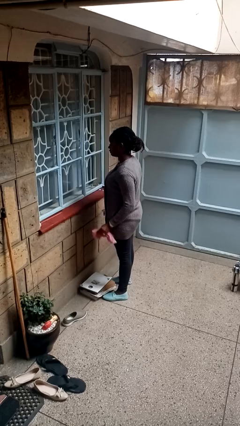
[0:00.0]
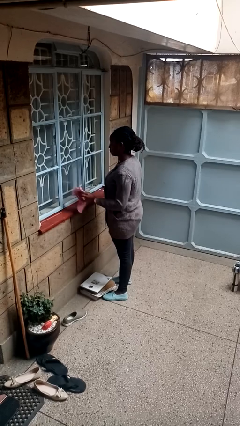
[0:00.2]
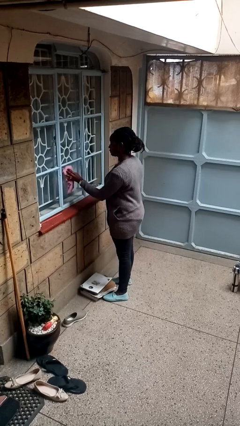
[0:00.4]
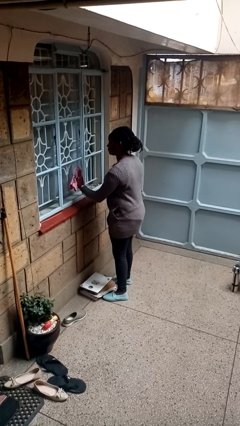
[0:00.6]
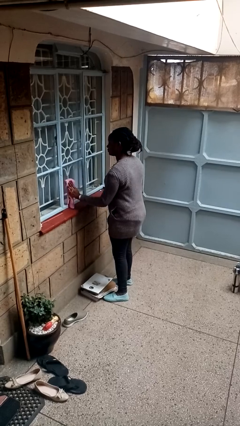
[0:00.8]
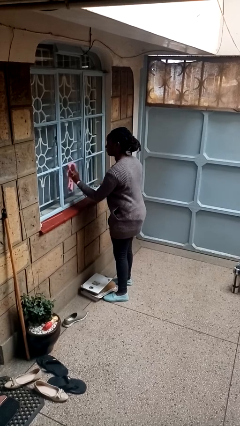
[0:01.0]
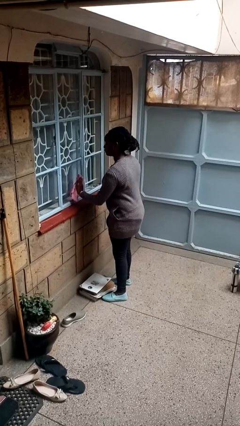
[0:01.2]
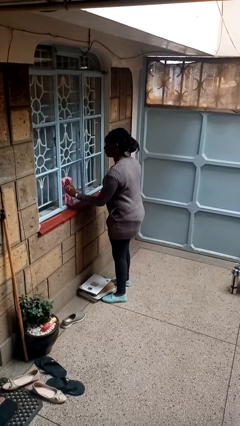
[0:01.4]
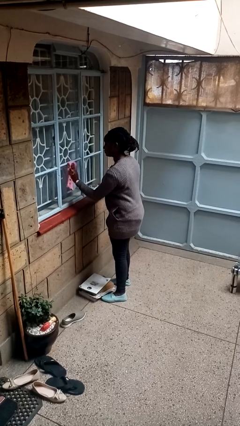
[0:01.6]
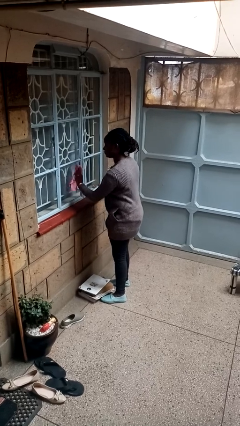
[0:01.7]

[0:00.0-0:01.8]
person washes window

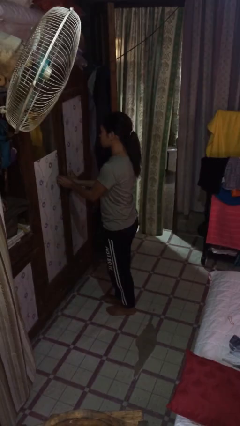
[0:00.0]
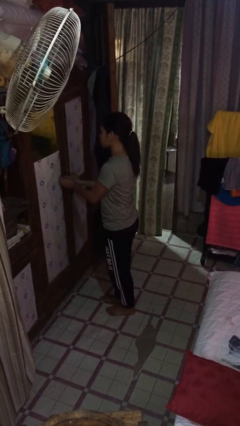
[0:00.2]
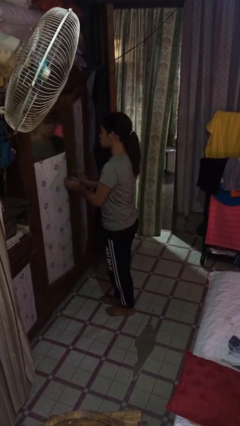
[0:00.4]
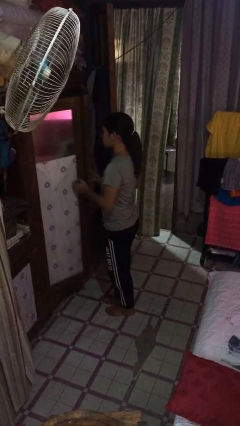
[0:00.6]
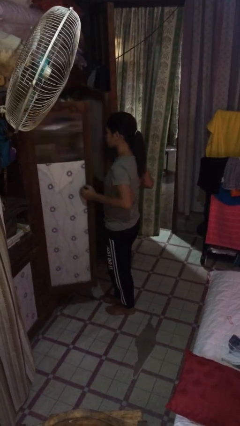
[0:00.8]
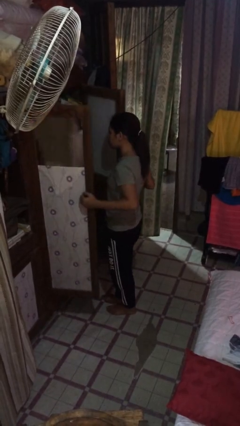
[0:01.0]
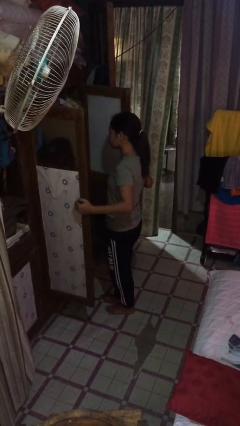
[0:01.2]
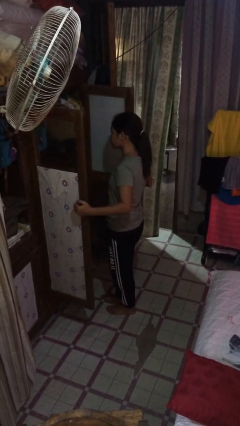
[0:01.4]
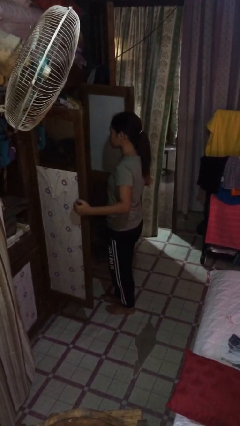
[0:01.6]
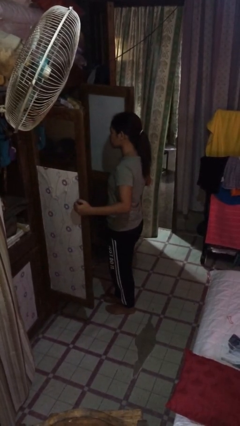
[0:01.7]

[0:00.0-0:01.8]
person opens closet door

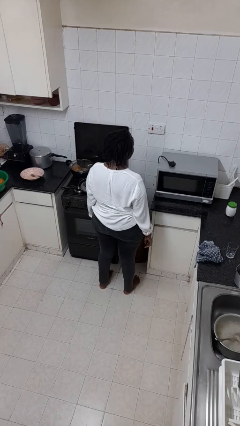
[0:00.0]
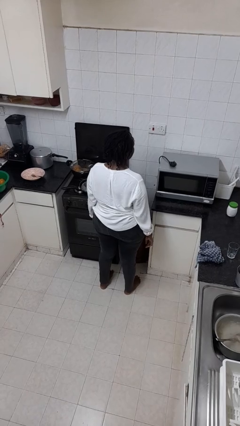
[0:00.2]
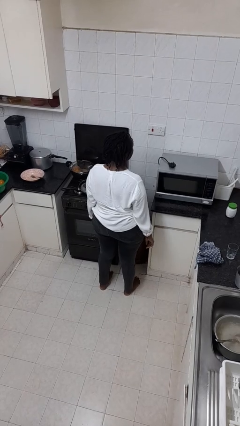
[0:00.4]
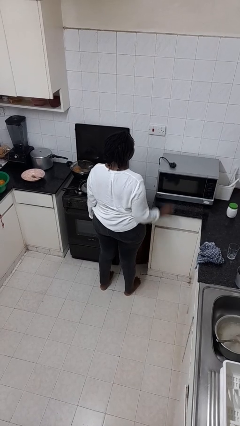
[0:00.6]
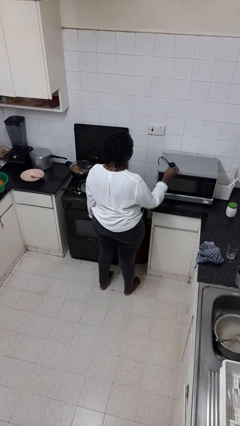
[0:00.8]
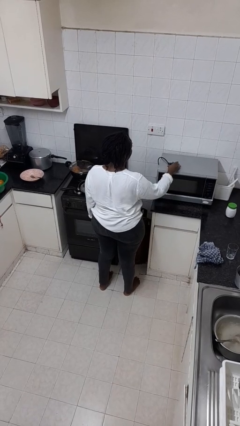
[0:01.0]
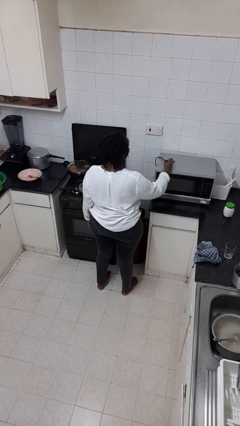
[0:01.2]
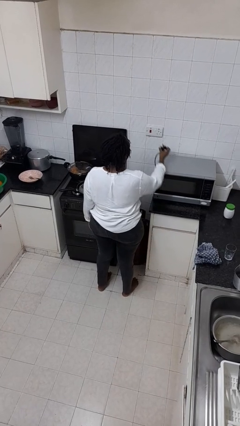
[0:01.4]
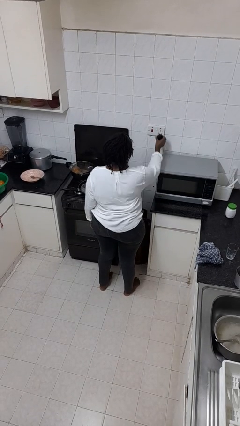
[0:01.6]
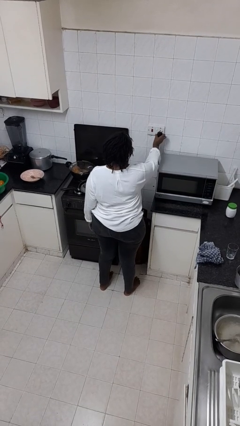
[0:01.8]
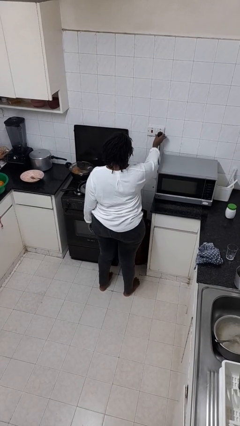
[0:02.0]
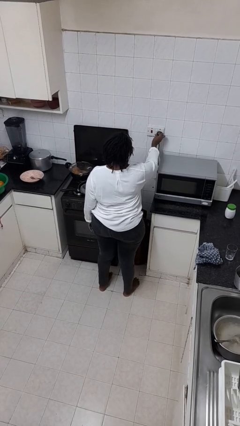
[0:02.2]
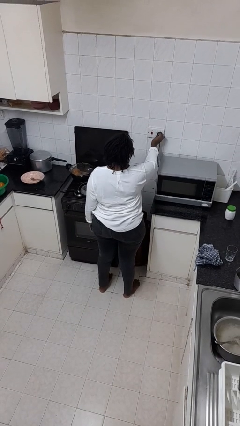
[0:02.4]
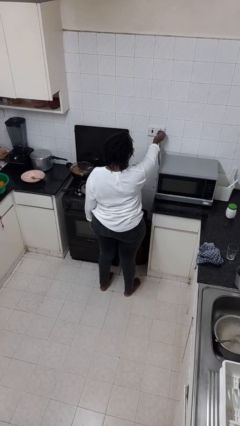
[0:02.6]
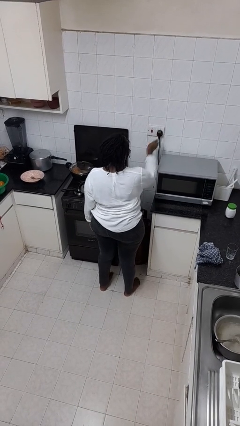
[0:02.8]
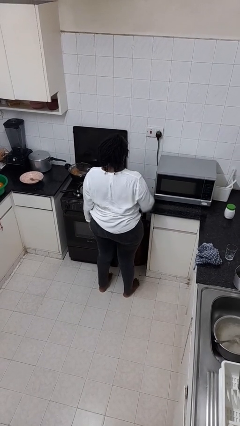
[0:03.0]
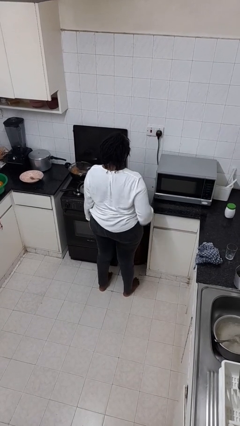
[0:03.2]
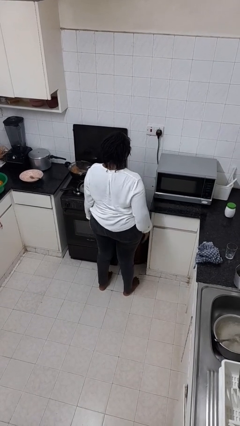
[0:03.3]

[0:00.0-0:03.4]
person plugs into electrical socket

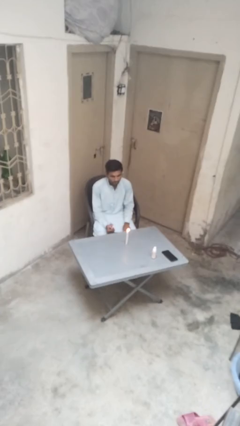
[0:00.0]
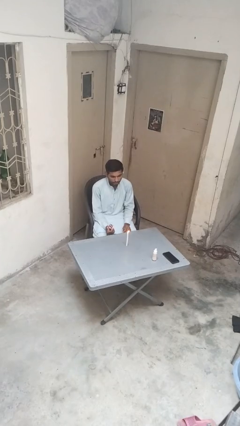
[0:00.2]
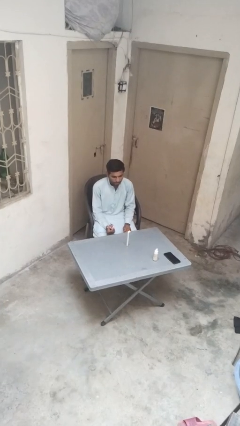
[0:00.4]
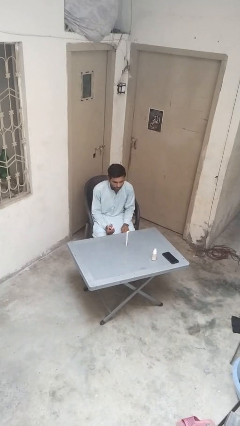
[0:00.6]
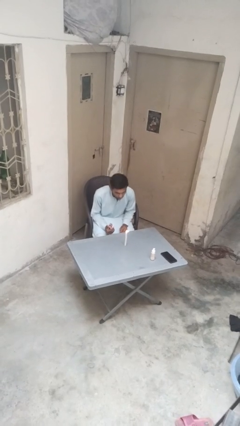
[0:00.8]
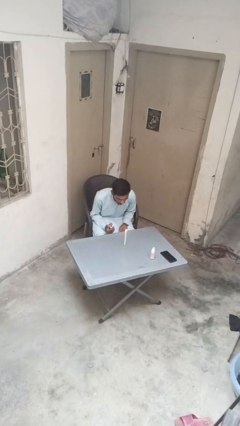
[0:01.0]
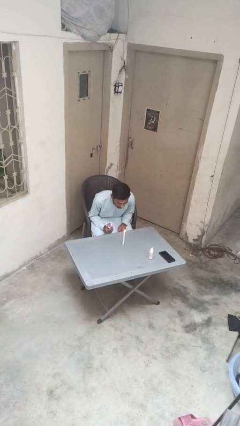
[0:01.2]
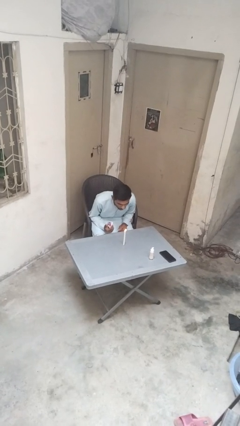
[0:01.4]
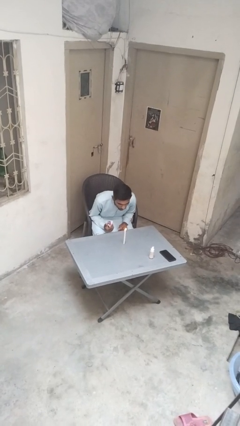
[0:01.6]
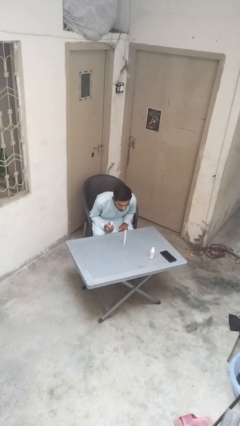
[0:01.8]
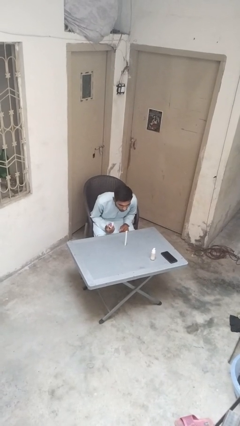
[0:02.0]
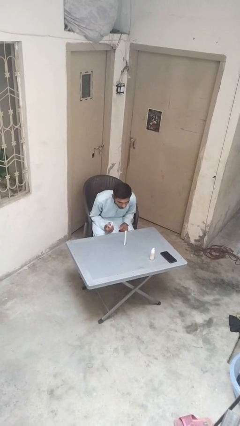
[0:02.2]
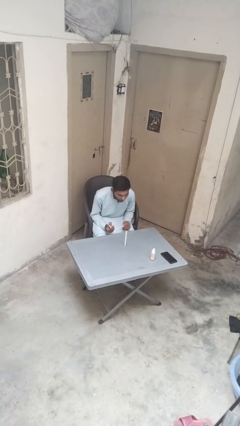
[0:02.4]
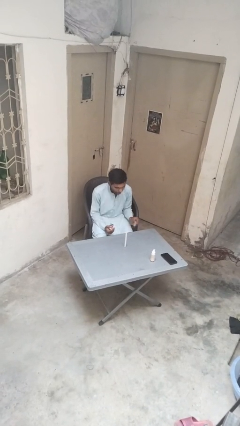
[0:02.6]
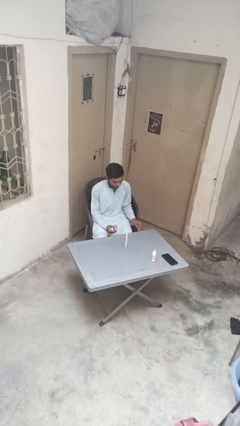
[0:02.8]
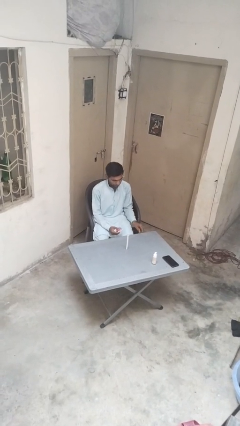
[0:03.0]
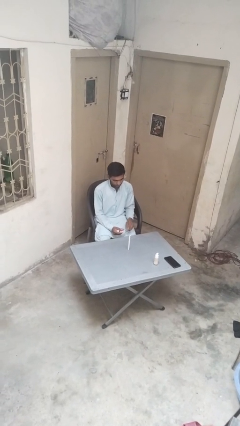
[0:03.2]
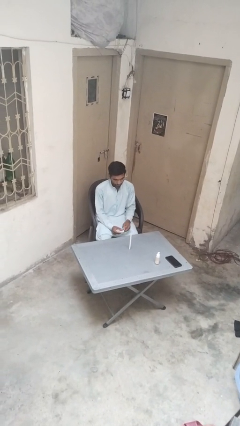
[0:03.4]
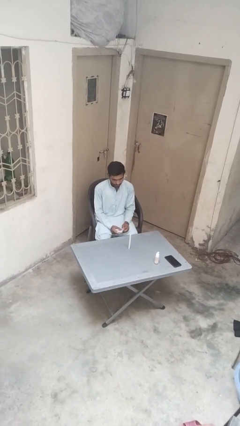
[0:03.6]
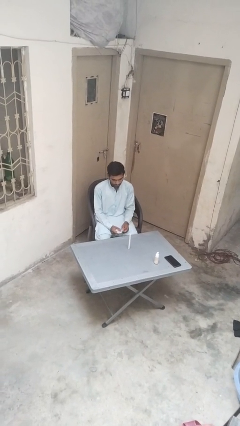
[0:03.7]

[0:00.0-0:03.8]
person extinguishes candle

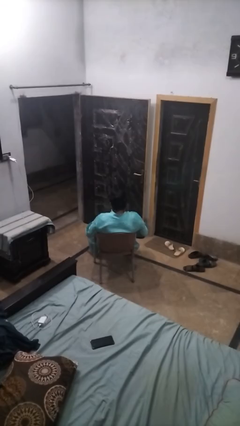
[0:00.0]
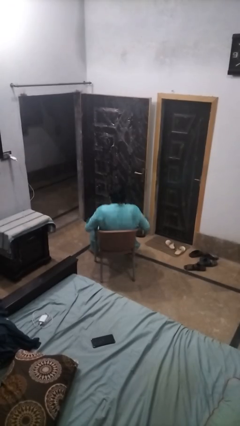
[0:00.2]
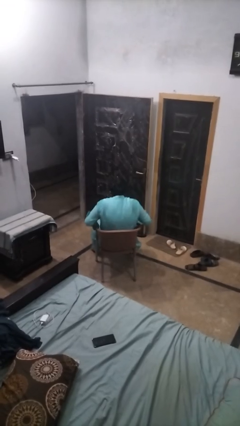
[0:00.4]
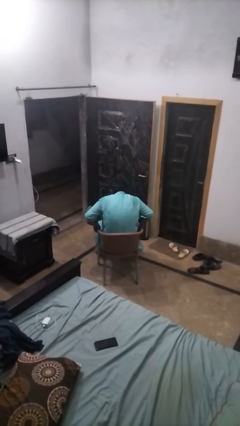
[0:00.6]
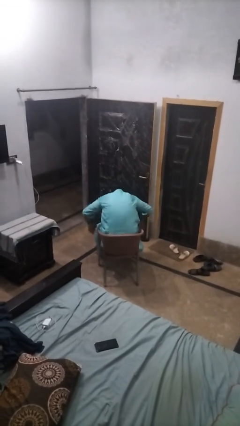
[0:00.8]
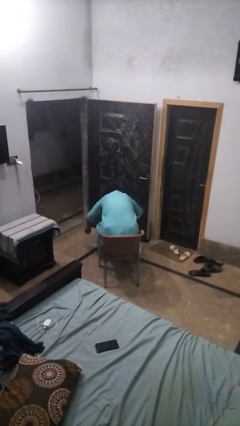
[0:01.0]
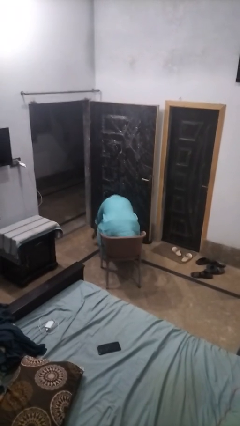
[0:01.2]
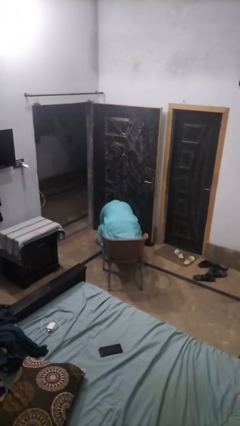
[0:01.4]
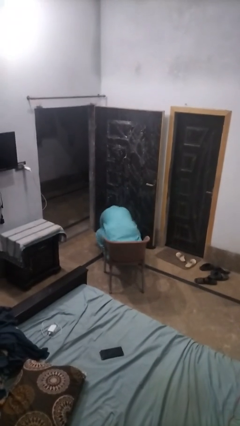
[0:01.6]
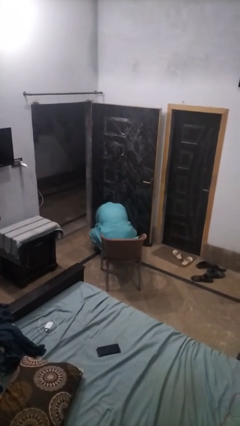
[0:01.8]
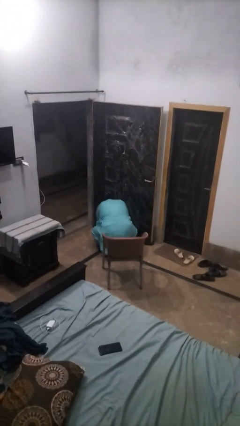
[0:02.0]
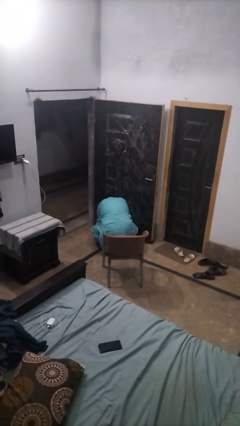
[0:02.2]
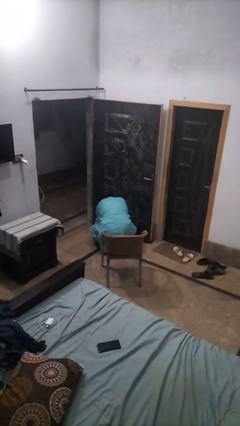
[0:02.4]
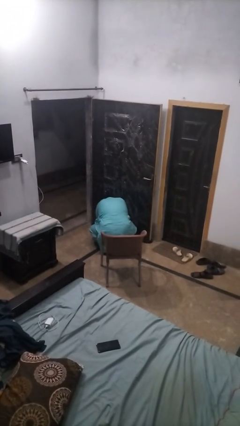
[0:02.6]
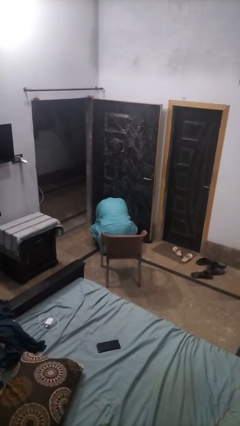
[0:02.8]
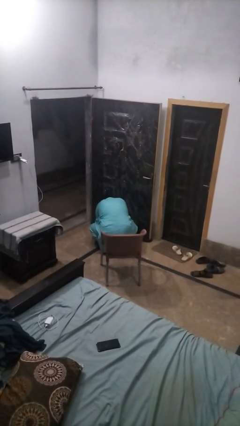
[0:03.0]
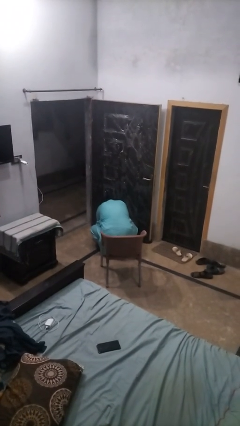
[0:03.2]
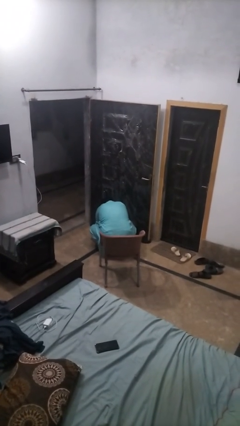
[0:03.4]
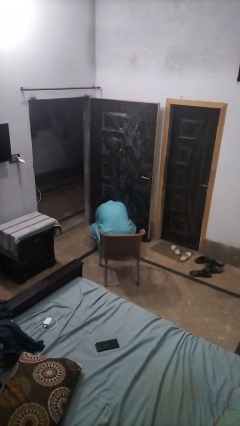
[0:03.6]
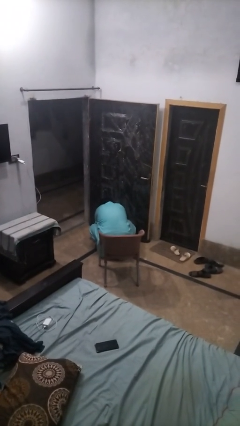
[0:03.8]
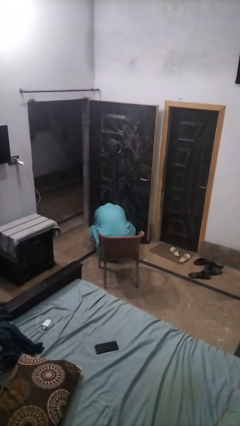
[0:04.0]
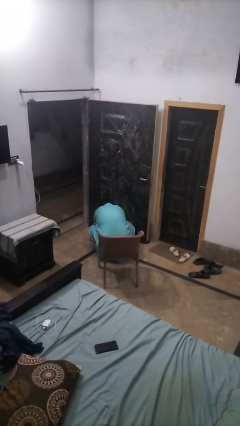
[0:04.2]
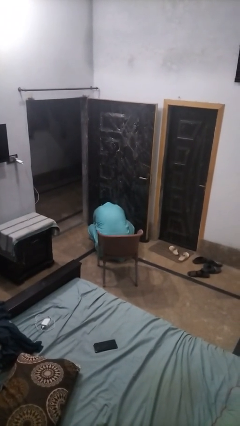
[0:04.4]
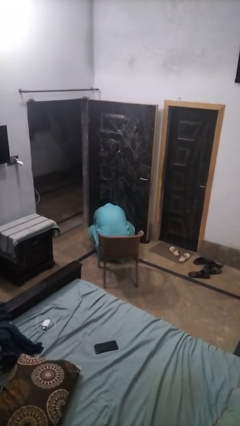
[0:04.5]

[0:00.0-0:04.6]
person falls from chair

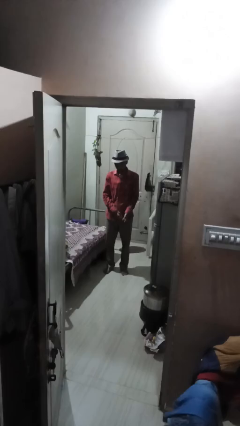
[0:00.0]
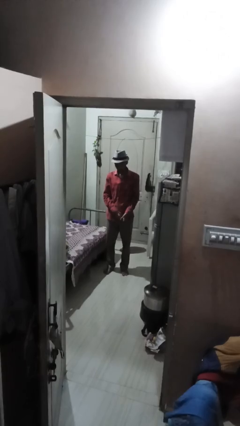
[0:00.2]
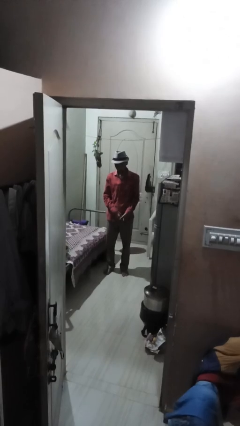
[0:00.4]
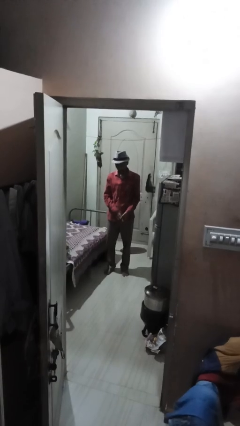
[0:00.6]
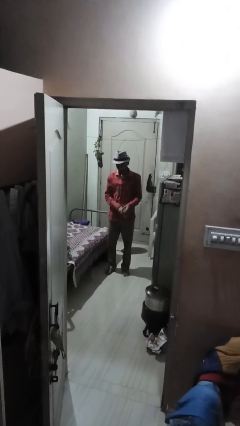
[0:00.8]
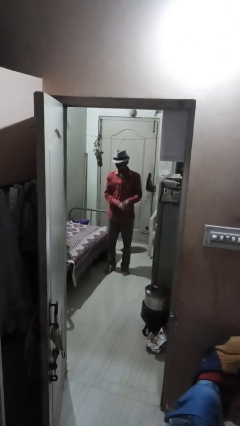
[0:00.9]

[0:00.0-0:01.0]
person cracks knuckles

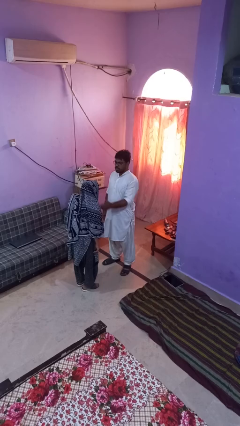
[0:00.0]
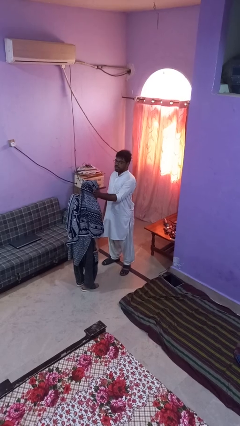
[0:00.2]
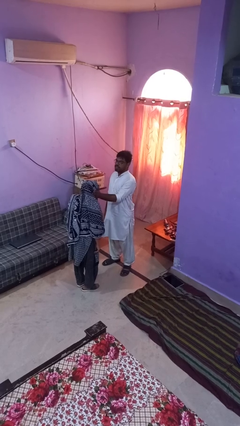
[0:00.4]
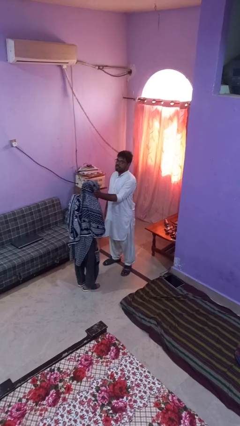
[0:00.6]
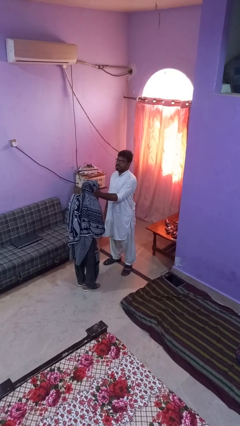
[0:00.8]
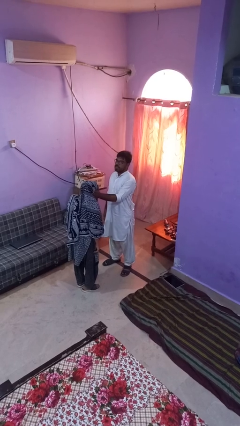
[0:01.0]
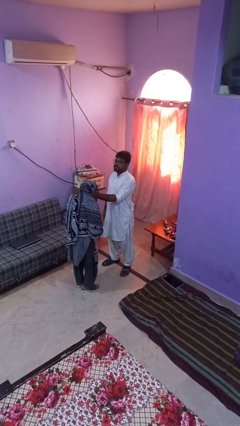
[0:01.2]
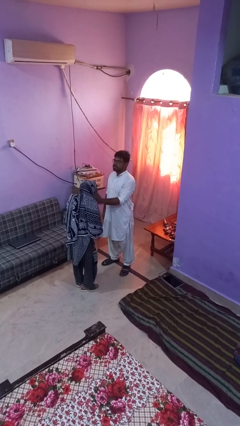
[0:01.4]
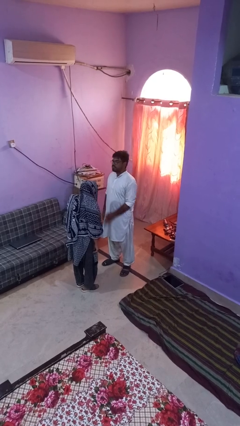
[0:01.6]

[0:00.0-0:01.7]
person touches face of person
